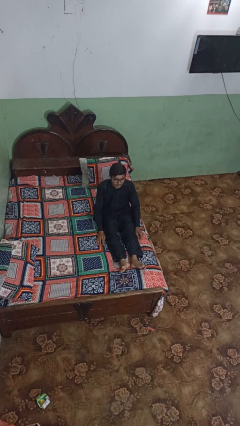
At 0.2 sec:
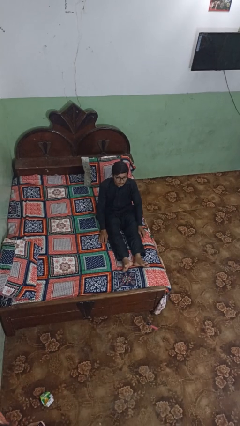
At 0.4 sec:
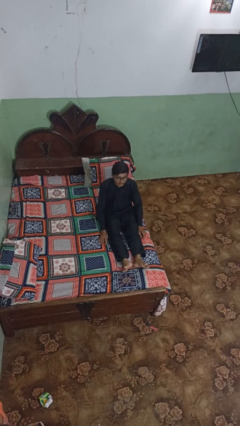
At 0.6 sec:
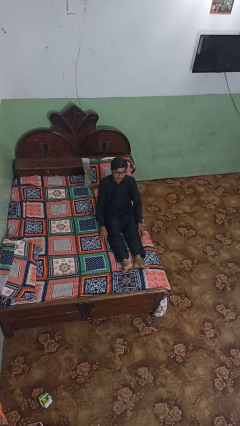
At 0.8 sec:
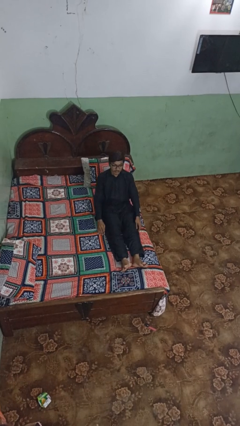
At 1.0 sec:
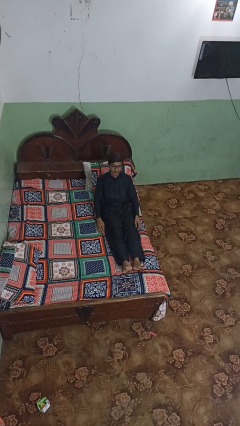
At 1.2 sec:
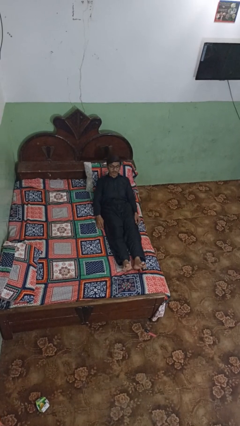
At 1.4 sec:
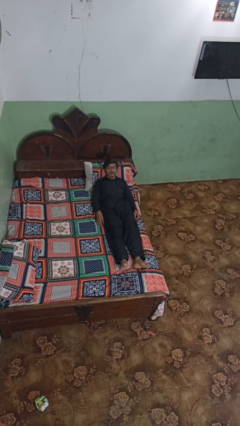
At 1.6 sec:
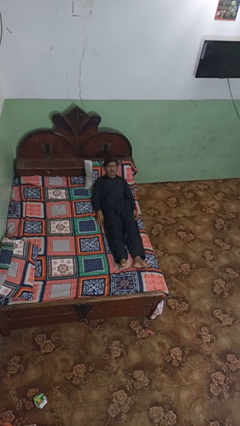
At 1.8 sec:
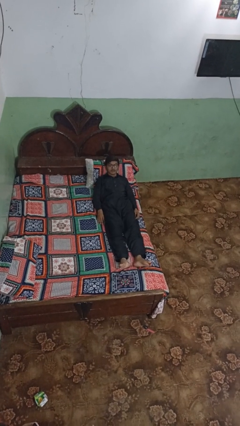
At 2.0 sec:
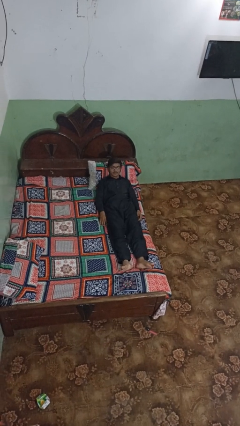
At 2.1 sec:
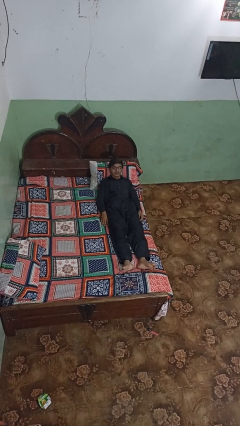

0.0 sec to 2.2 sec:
person lies down on bed

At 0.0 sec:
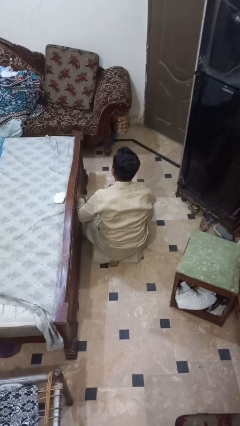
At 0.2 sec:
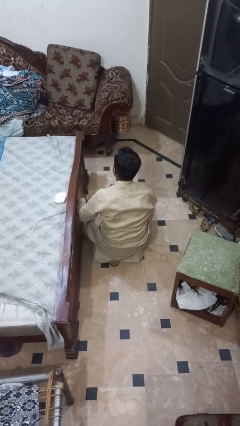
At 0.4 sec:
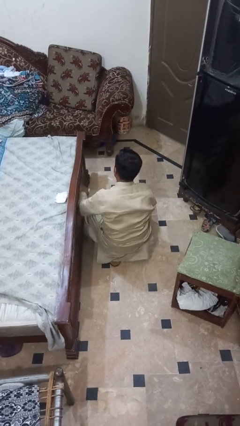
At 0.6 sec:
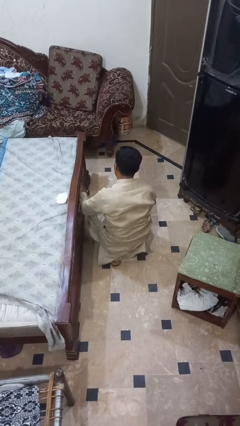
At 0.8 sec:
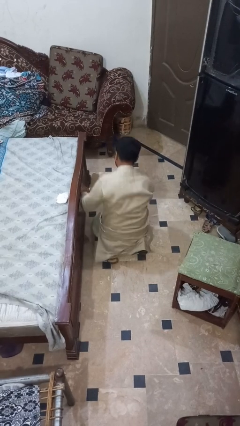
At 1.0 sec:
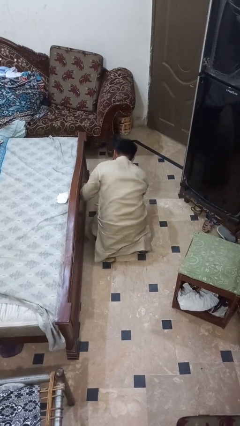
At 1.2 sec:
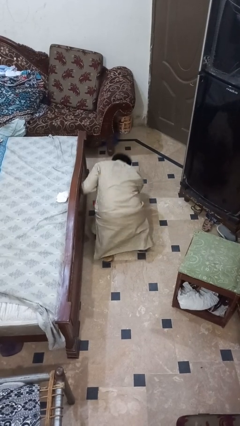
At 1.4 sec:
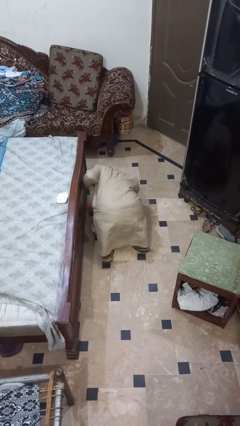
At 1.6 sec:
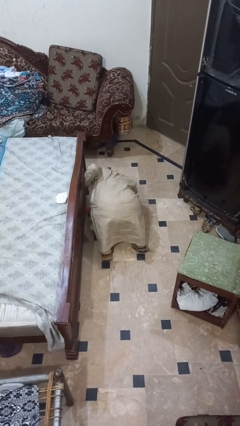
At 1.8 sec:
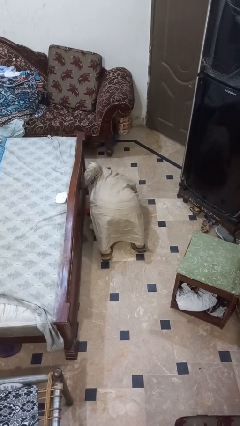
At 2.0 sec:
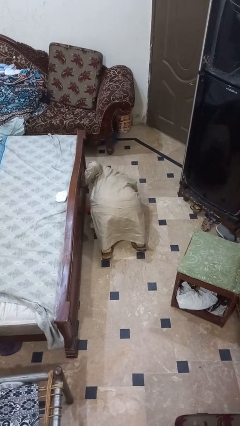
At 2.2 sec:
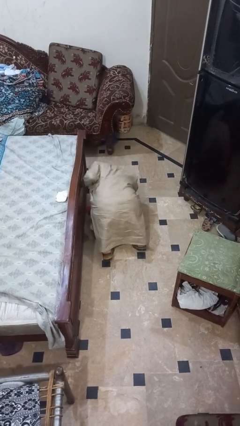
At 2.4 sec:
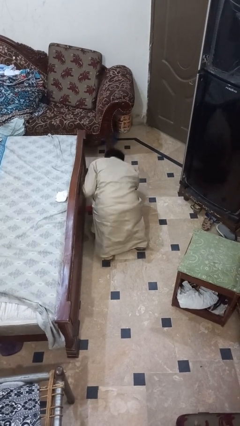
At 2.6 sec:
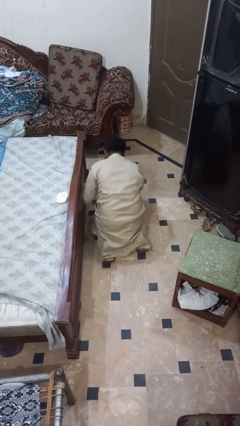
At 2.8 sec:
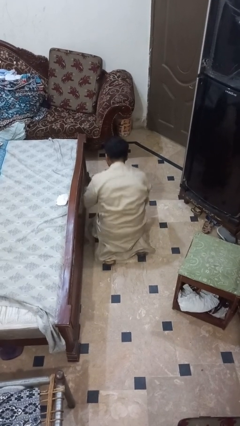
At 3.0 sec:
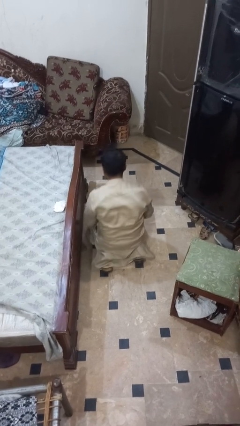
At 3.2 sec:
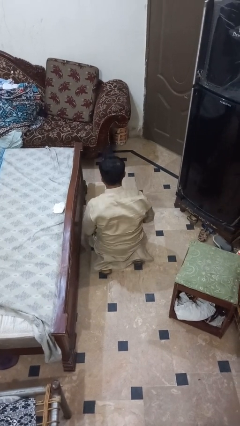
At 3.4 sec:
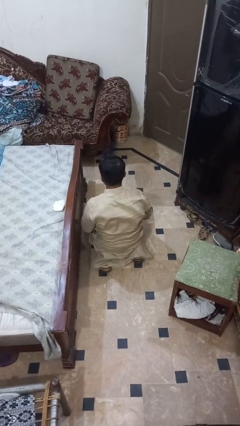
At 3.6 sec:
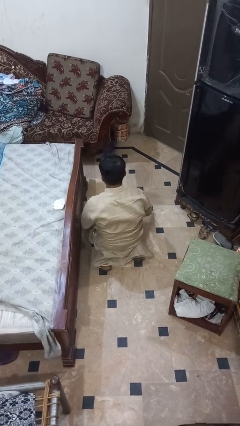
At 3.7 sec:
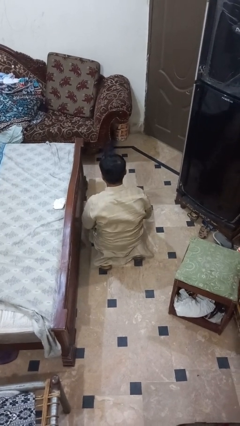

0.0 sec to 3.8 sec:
person searches under bed

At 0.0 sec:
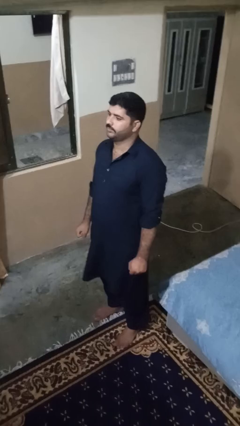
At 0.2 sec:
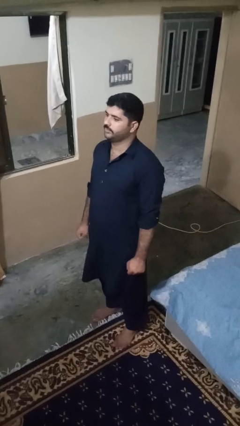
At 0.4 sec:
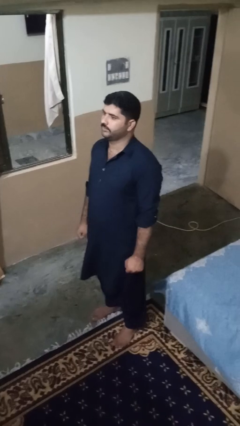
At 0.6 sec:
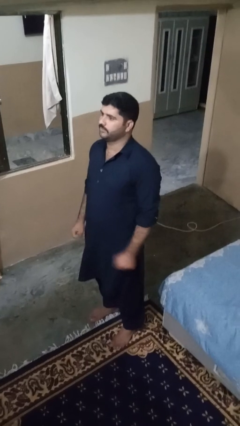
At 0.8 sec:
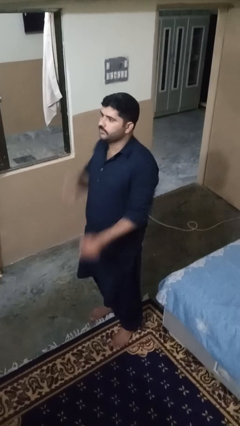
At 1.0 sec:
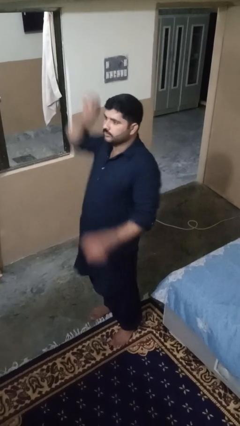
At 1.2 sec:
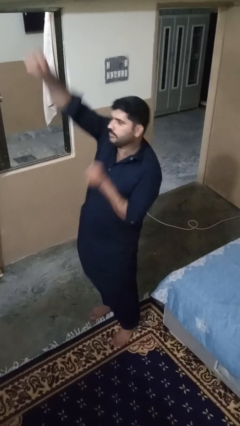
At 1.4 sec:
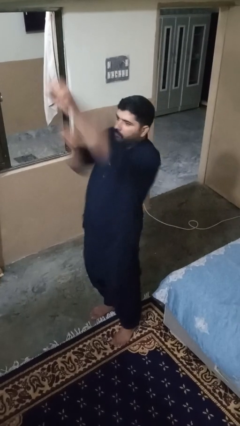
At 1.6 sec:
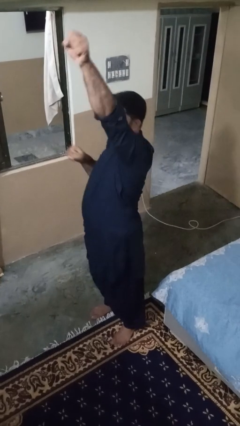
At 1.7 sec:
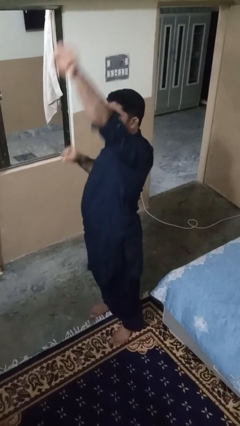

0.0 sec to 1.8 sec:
person punches

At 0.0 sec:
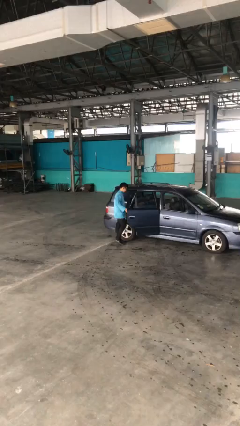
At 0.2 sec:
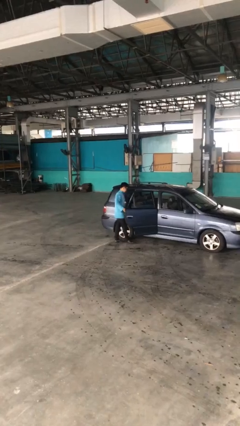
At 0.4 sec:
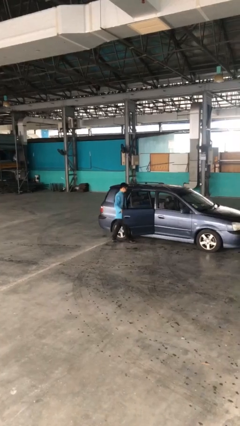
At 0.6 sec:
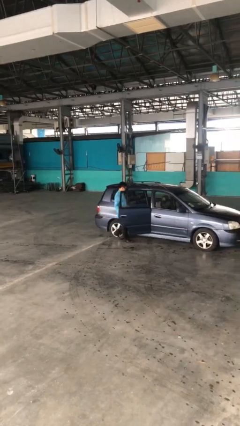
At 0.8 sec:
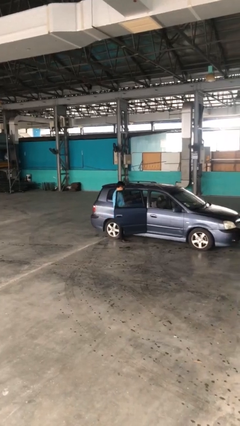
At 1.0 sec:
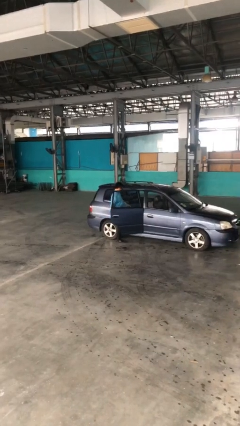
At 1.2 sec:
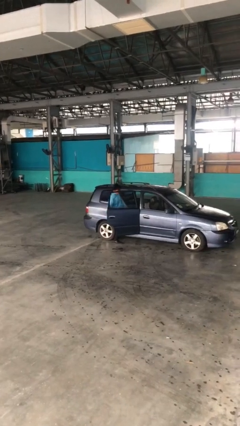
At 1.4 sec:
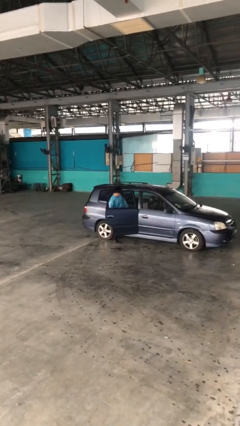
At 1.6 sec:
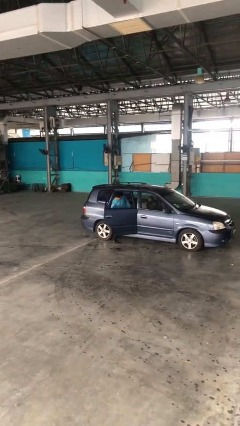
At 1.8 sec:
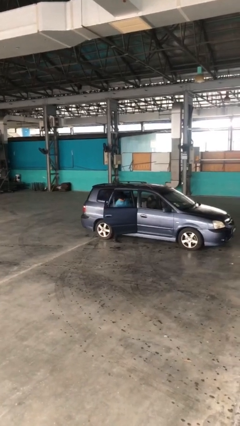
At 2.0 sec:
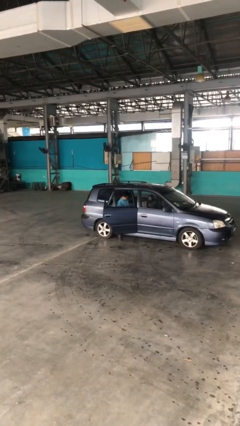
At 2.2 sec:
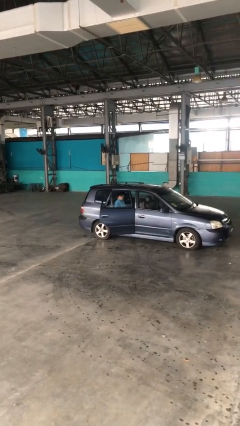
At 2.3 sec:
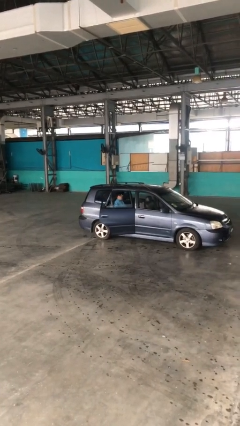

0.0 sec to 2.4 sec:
person enters car

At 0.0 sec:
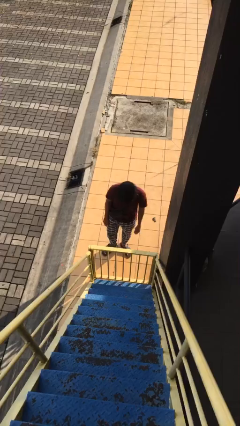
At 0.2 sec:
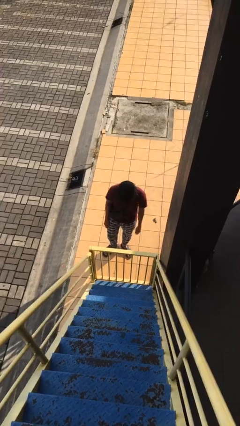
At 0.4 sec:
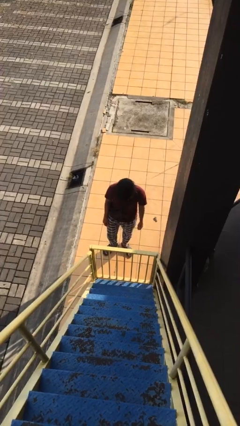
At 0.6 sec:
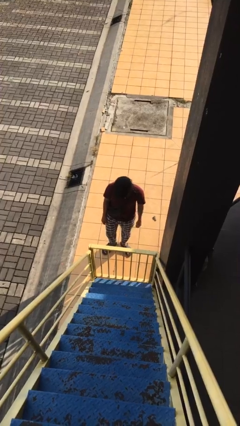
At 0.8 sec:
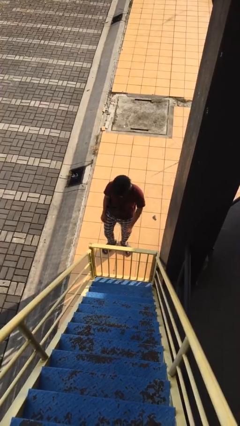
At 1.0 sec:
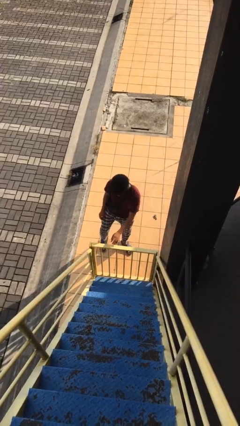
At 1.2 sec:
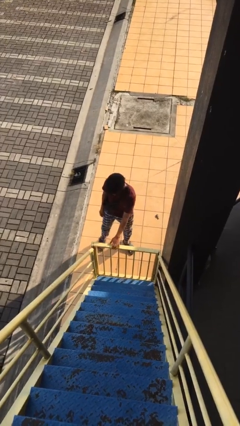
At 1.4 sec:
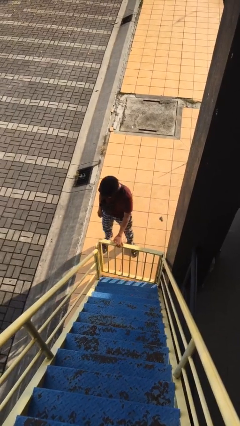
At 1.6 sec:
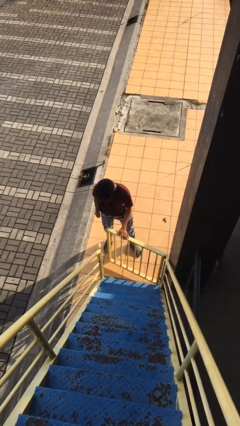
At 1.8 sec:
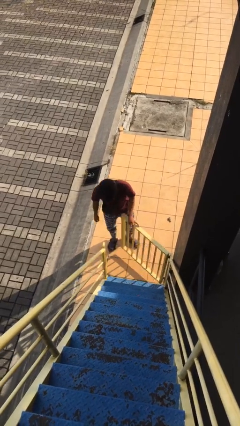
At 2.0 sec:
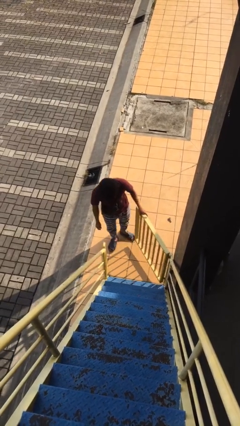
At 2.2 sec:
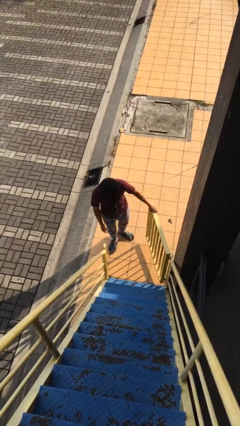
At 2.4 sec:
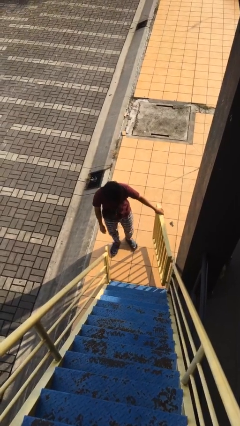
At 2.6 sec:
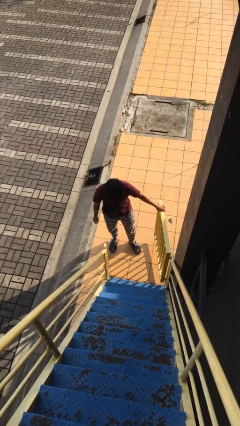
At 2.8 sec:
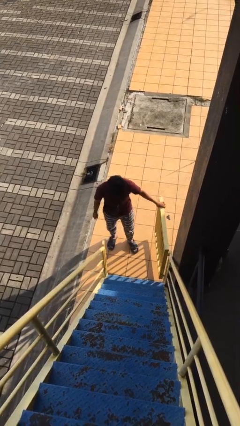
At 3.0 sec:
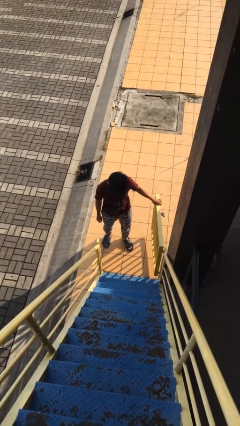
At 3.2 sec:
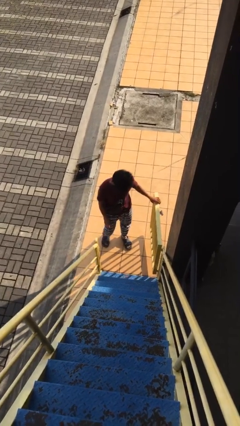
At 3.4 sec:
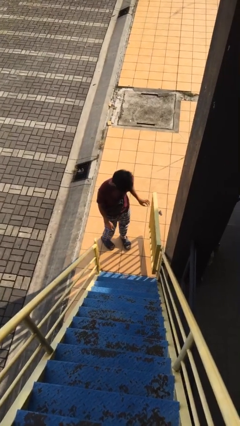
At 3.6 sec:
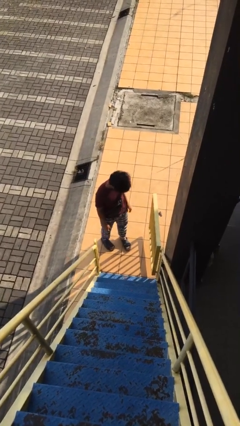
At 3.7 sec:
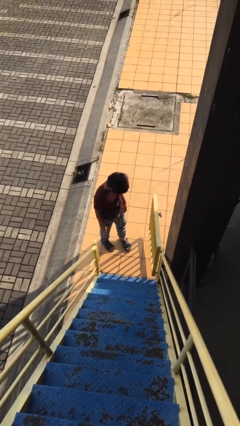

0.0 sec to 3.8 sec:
person opens facility door

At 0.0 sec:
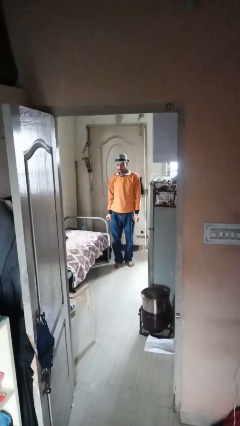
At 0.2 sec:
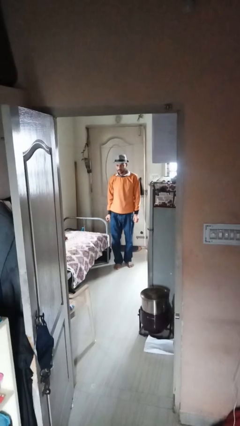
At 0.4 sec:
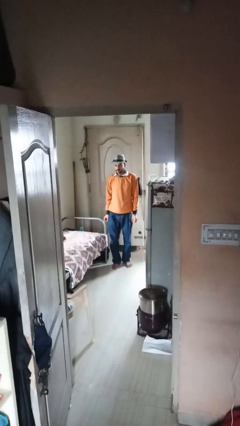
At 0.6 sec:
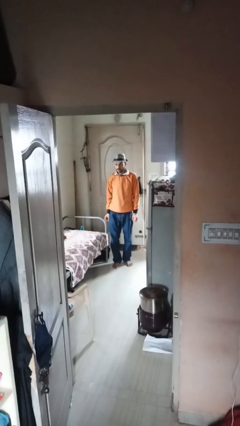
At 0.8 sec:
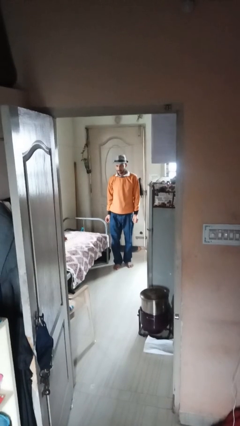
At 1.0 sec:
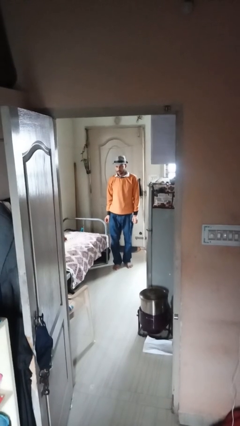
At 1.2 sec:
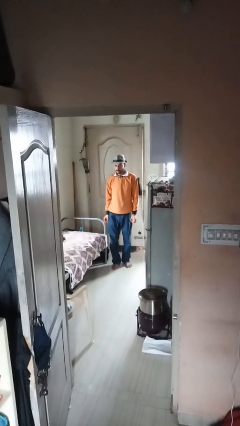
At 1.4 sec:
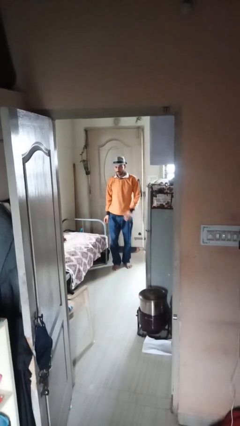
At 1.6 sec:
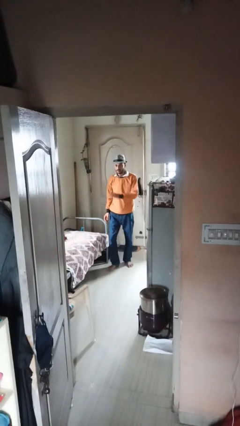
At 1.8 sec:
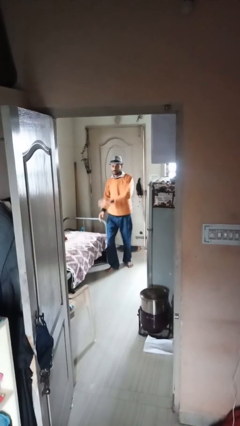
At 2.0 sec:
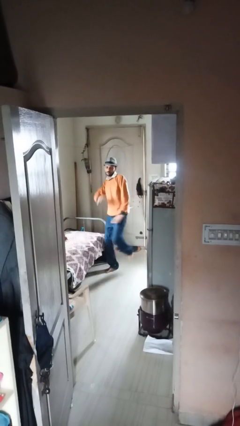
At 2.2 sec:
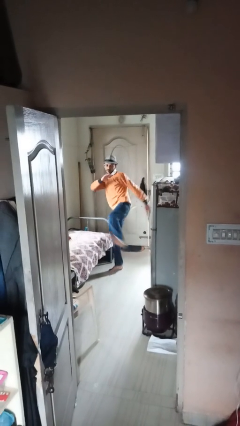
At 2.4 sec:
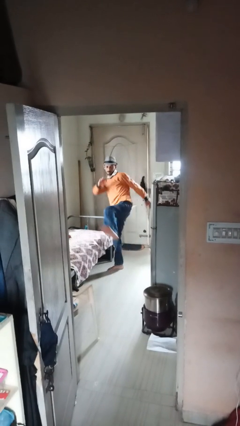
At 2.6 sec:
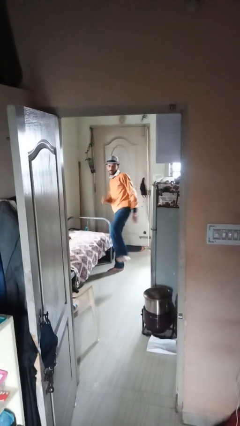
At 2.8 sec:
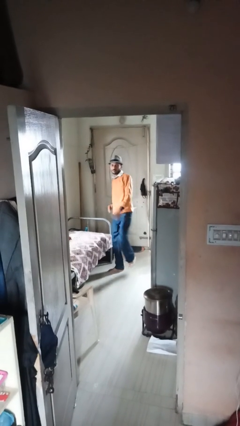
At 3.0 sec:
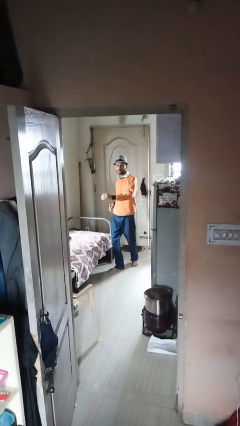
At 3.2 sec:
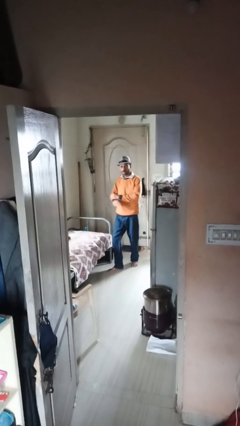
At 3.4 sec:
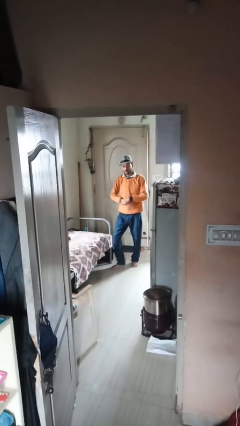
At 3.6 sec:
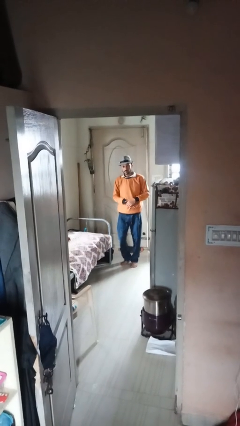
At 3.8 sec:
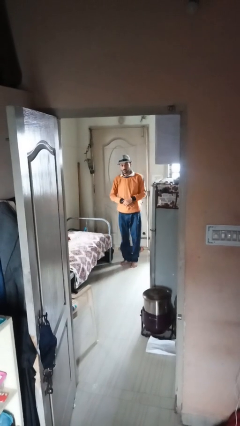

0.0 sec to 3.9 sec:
person karate kicks
